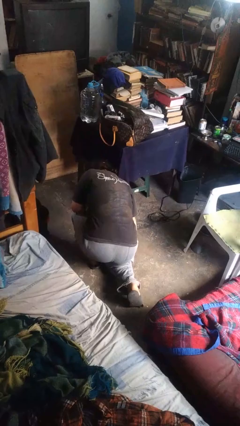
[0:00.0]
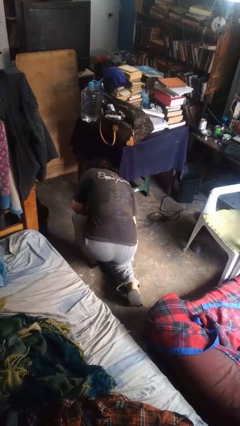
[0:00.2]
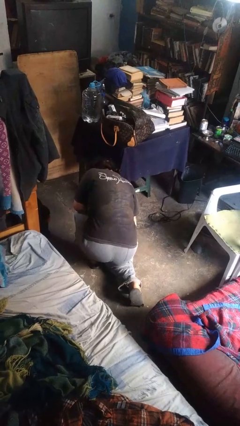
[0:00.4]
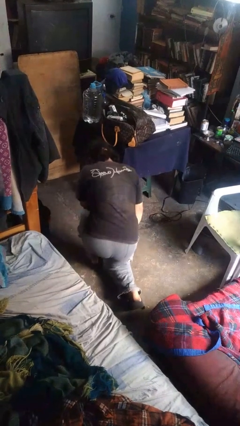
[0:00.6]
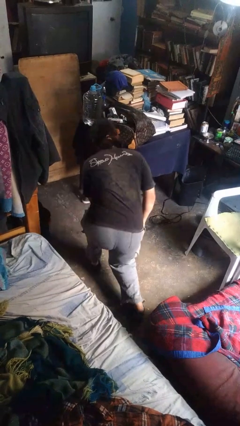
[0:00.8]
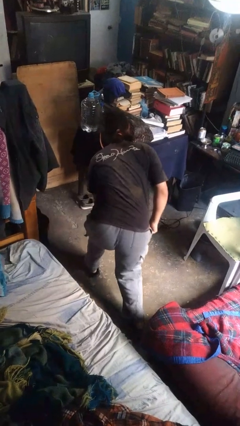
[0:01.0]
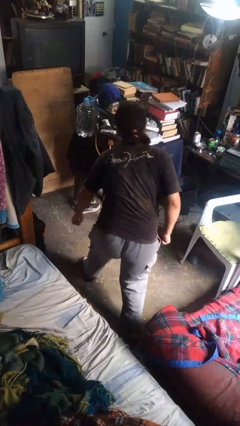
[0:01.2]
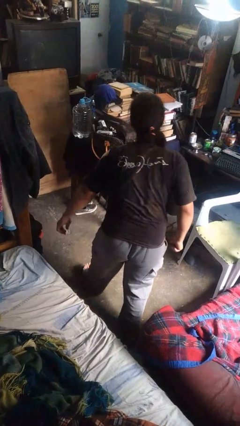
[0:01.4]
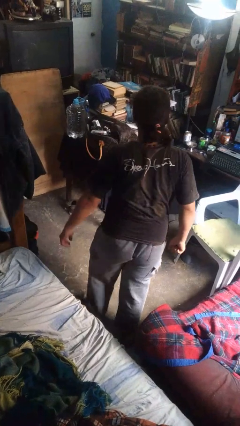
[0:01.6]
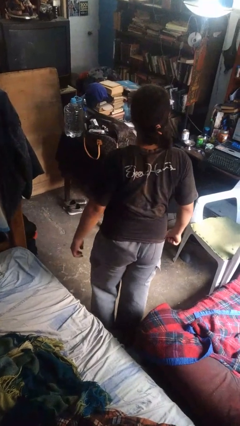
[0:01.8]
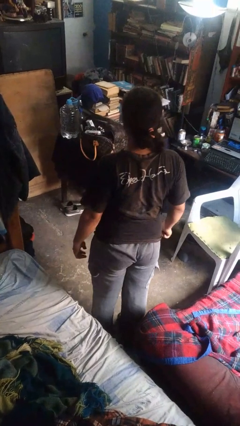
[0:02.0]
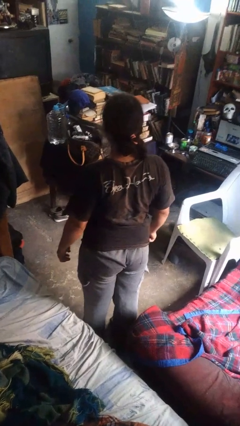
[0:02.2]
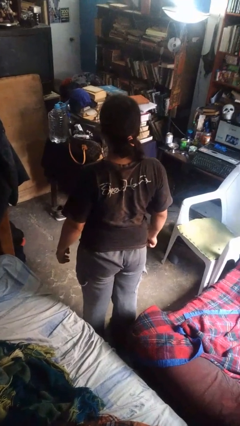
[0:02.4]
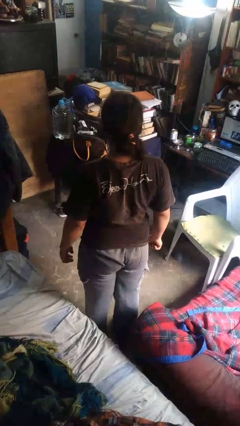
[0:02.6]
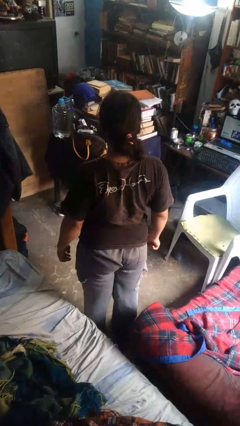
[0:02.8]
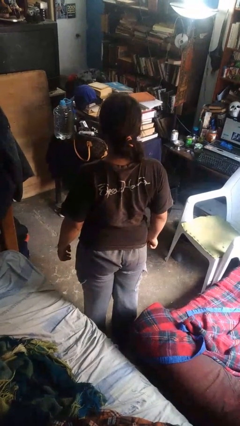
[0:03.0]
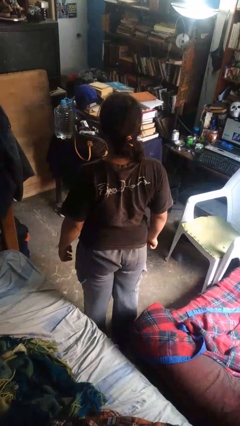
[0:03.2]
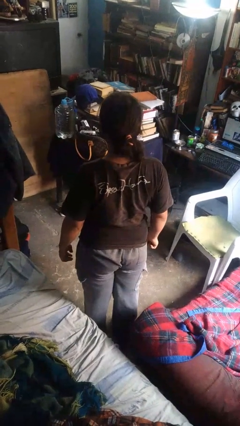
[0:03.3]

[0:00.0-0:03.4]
person stands up from floor

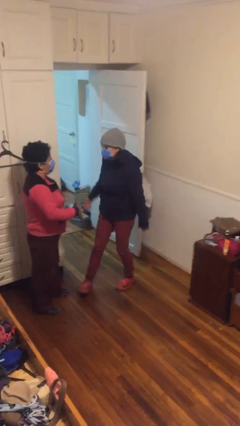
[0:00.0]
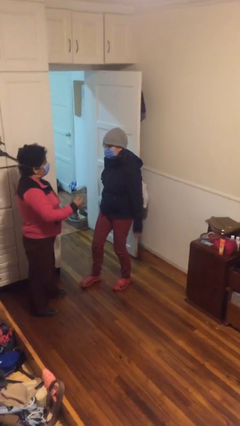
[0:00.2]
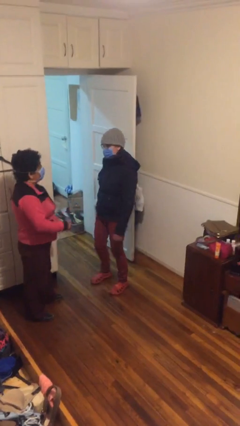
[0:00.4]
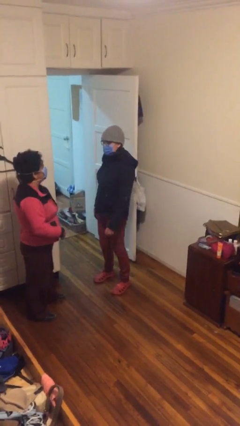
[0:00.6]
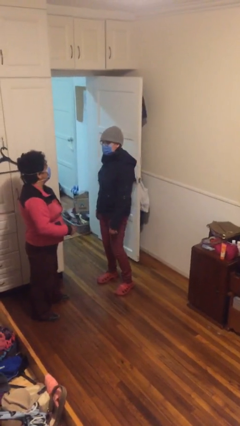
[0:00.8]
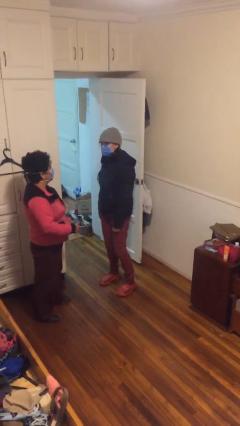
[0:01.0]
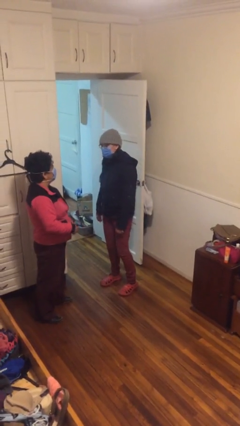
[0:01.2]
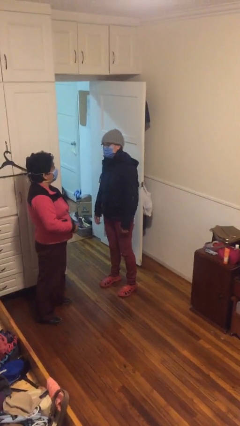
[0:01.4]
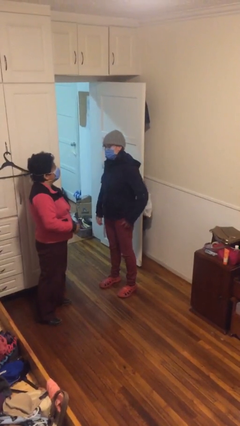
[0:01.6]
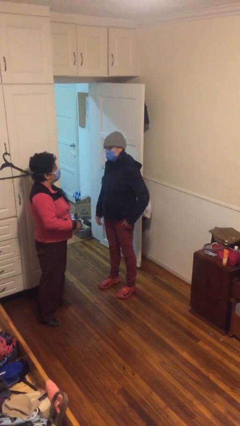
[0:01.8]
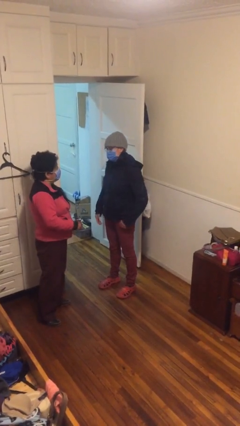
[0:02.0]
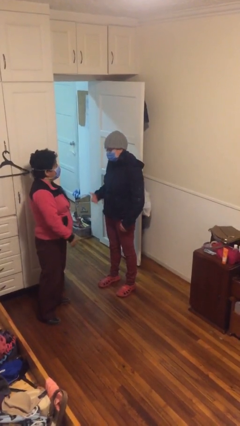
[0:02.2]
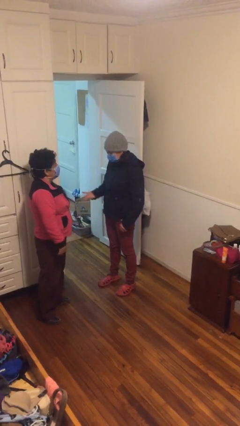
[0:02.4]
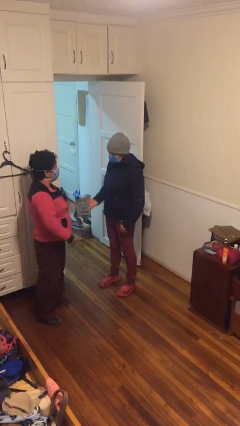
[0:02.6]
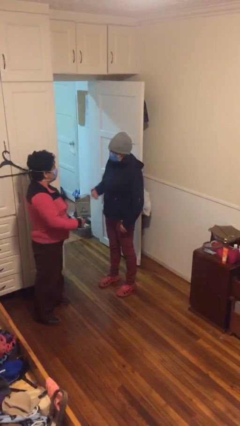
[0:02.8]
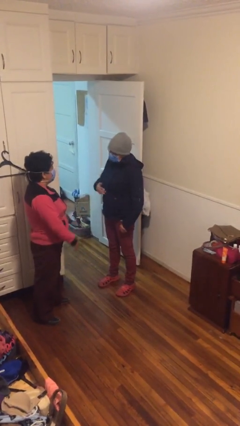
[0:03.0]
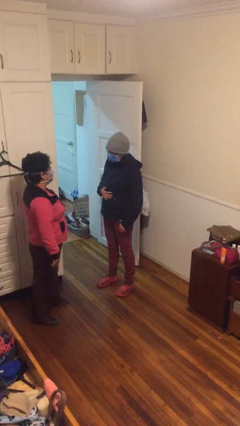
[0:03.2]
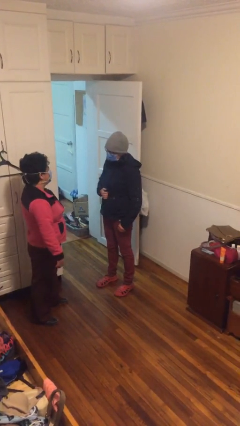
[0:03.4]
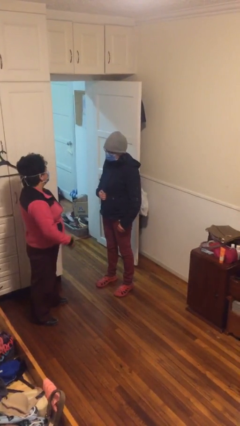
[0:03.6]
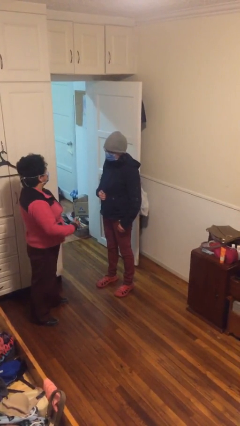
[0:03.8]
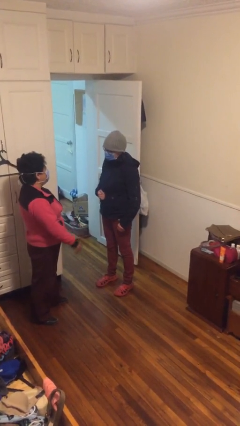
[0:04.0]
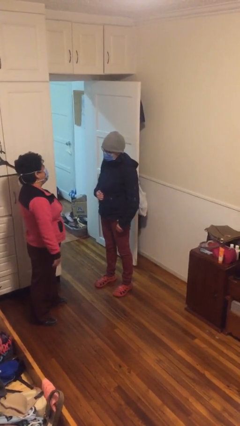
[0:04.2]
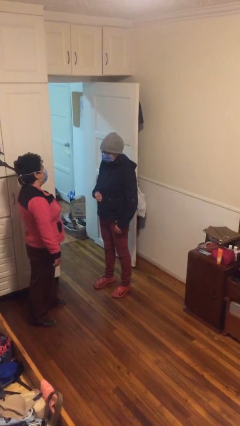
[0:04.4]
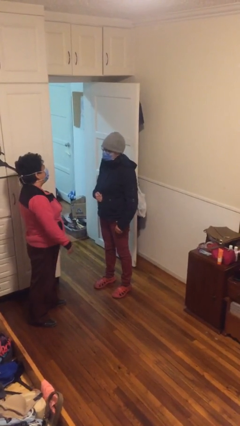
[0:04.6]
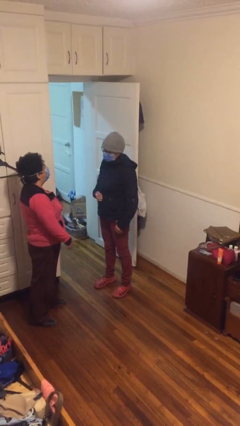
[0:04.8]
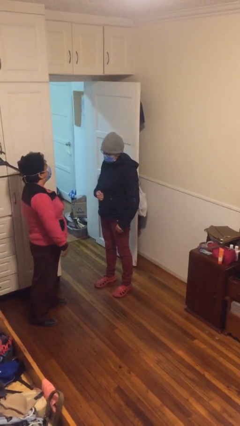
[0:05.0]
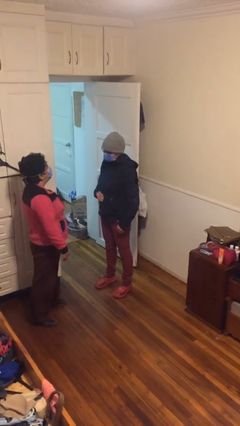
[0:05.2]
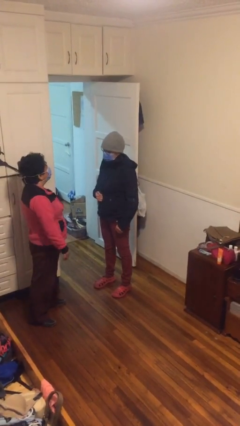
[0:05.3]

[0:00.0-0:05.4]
person talks to person

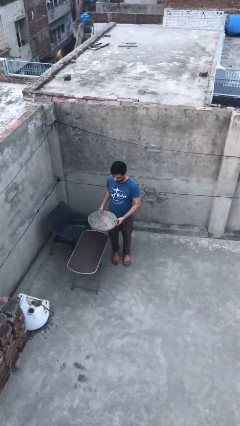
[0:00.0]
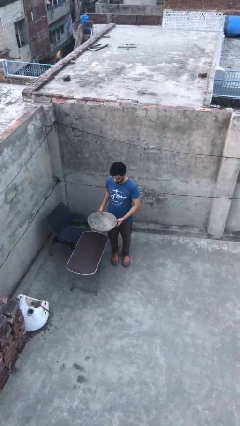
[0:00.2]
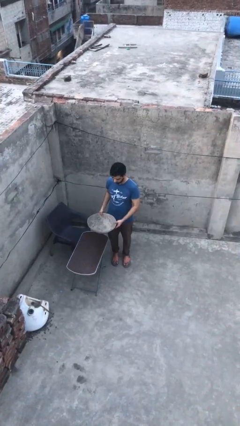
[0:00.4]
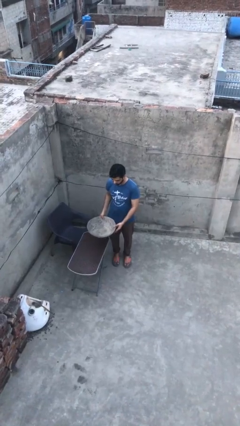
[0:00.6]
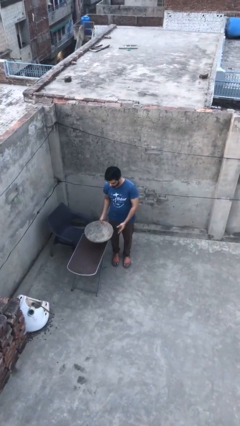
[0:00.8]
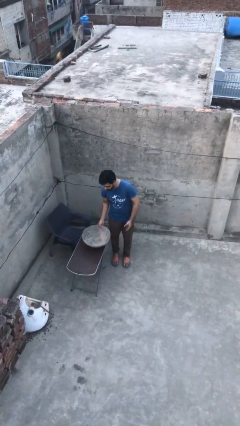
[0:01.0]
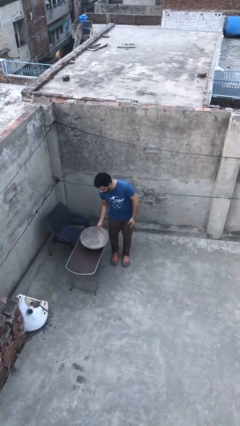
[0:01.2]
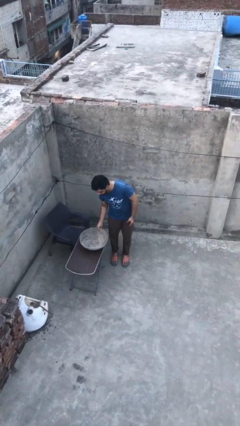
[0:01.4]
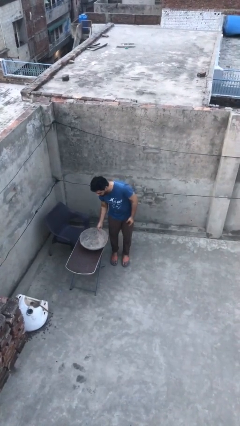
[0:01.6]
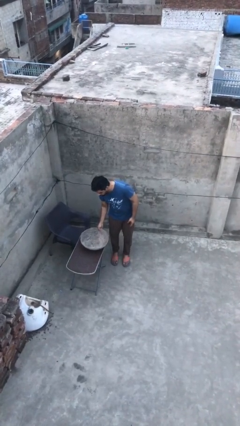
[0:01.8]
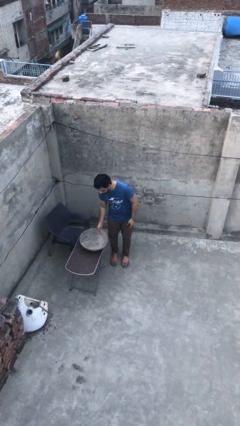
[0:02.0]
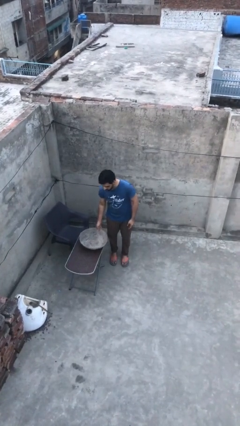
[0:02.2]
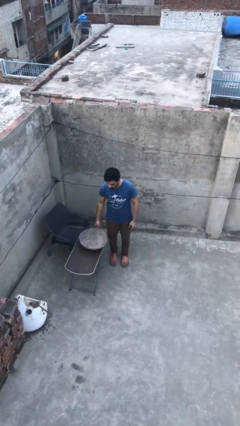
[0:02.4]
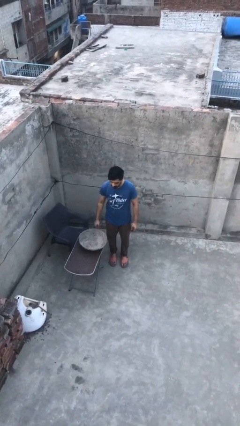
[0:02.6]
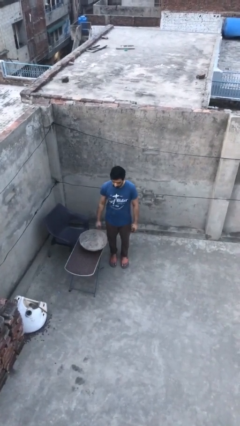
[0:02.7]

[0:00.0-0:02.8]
person puts down object on table

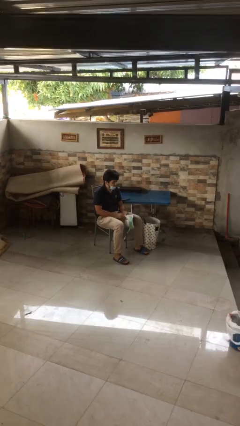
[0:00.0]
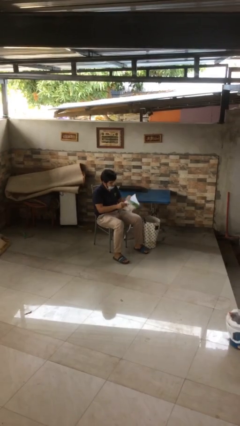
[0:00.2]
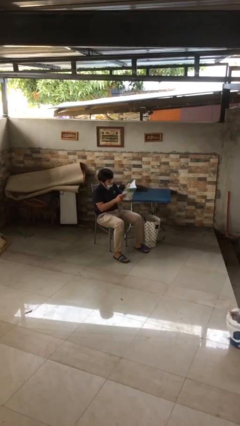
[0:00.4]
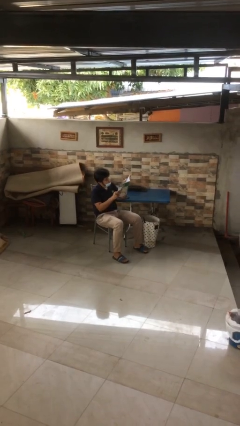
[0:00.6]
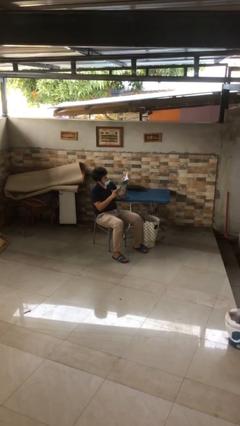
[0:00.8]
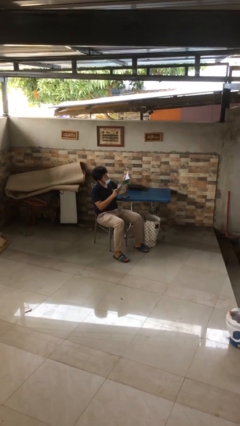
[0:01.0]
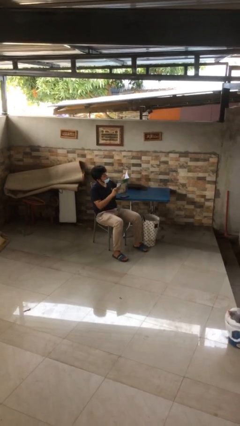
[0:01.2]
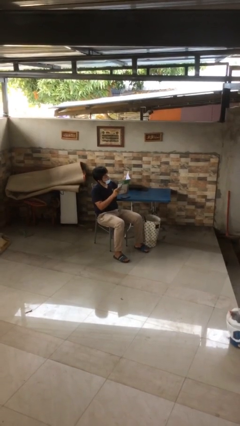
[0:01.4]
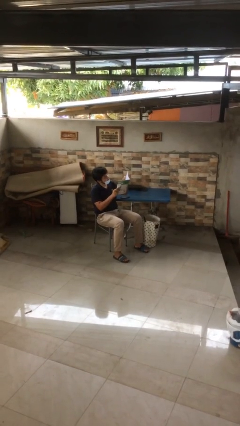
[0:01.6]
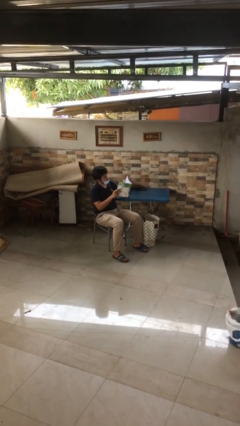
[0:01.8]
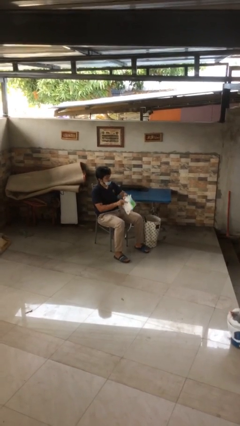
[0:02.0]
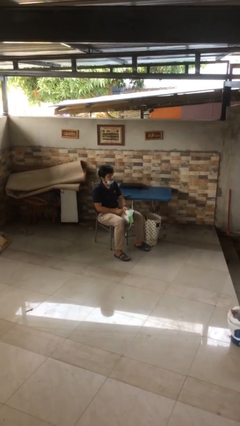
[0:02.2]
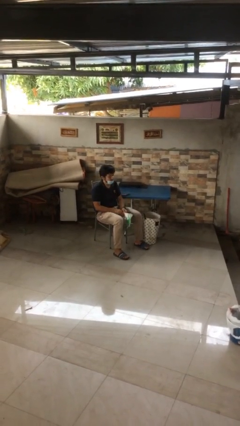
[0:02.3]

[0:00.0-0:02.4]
person reads magazine

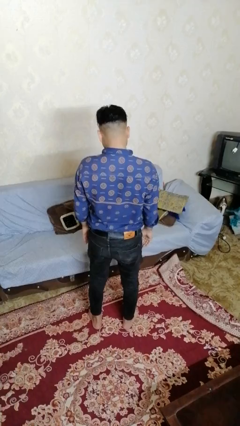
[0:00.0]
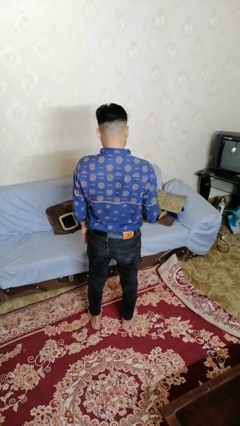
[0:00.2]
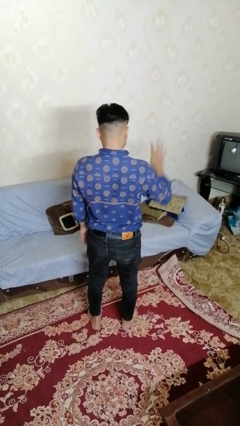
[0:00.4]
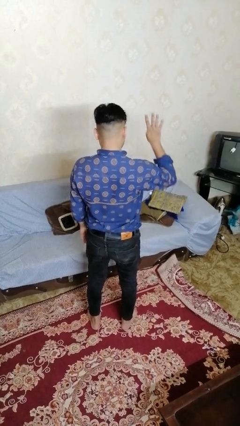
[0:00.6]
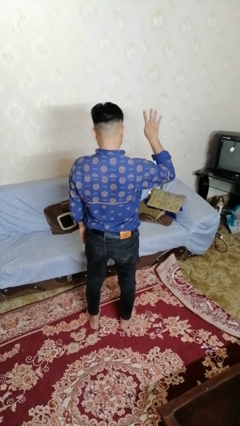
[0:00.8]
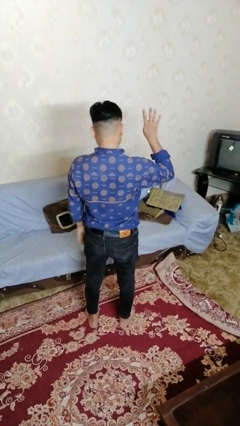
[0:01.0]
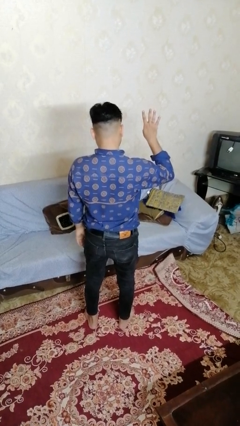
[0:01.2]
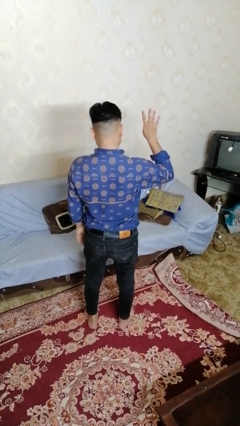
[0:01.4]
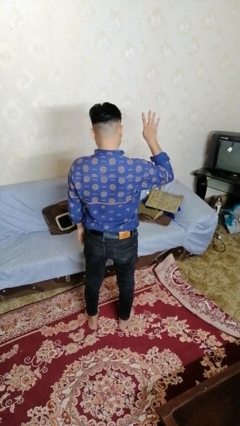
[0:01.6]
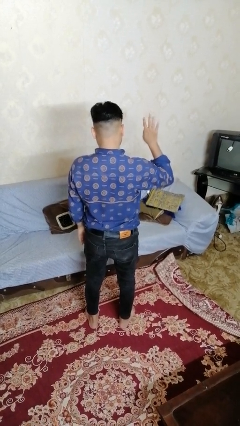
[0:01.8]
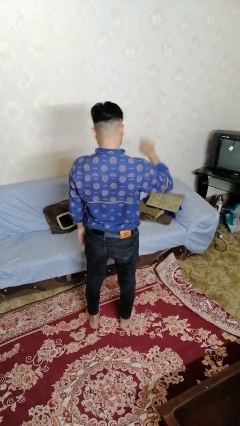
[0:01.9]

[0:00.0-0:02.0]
person gestures number four

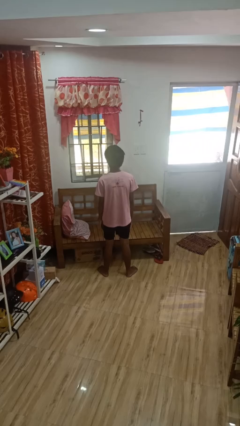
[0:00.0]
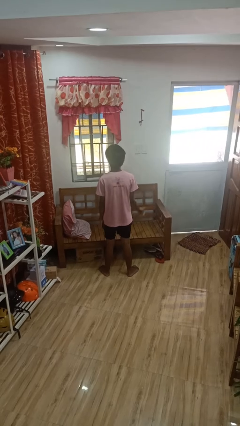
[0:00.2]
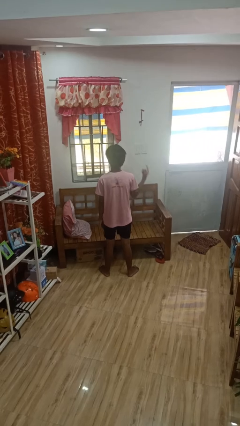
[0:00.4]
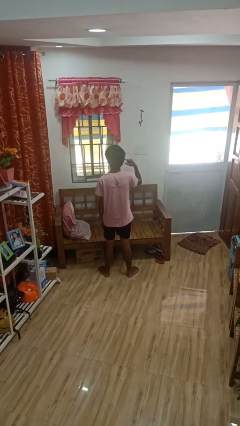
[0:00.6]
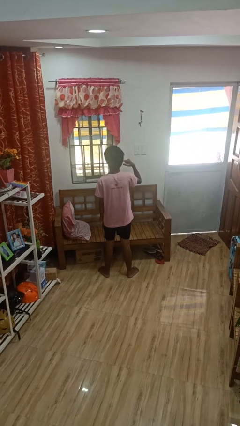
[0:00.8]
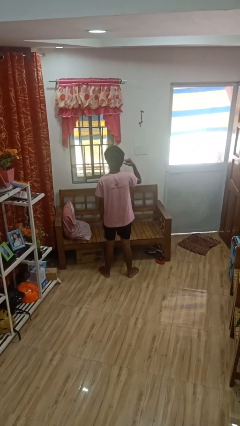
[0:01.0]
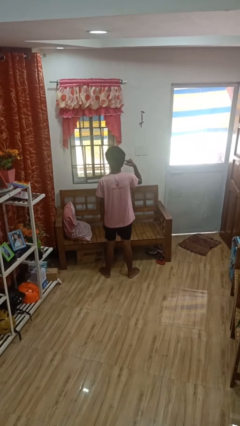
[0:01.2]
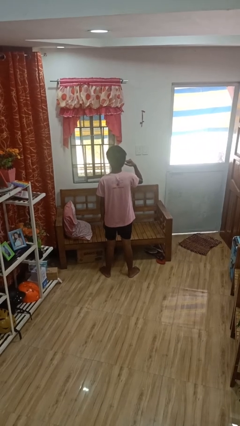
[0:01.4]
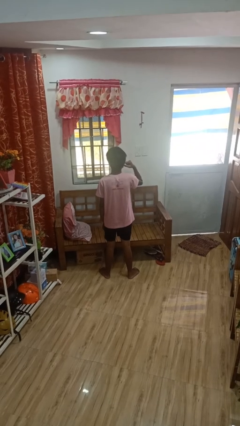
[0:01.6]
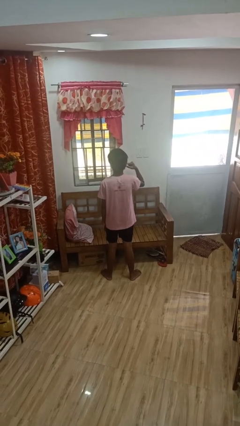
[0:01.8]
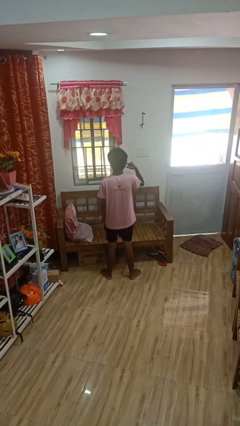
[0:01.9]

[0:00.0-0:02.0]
person gestures listen closely
